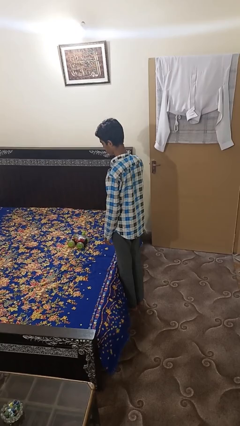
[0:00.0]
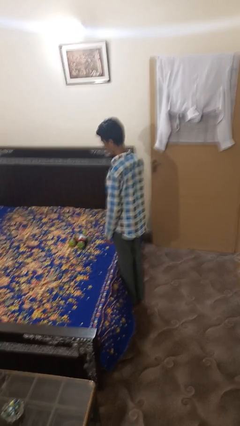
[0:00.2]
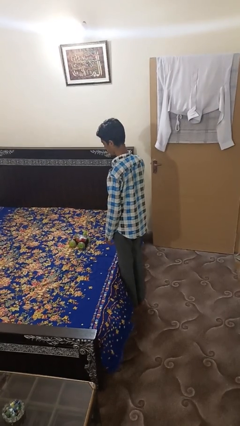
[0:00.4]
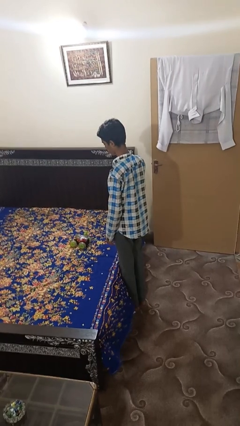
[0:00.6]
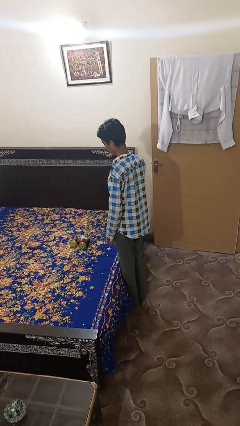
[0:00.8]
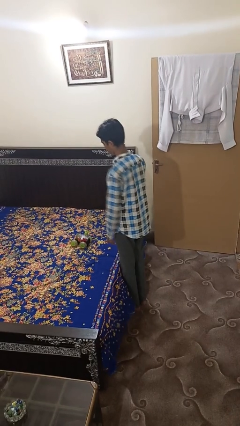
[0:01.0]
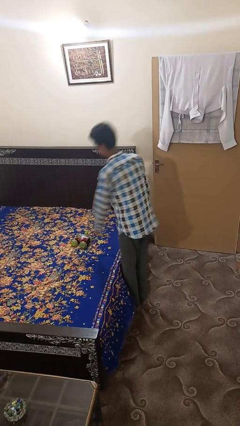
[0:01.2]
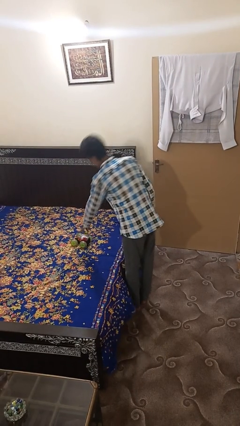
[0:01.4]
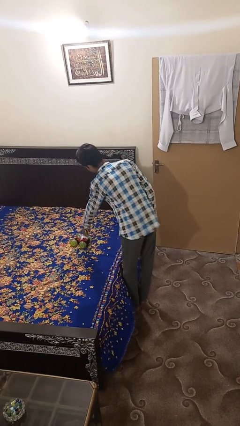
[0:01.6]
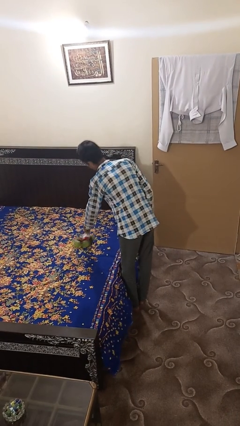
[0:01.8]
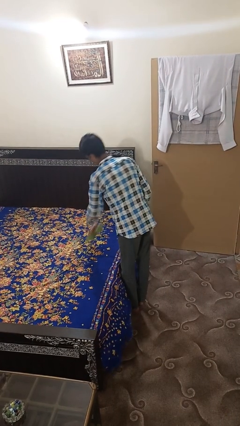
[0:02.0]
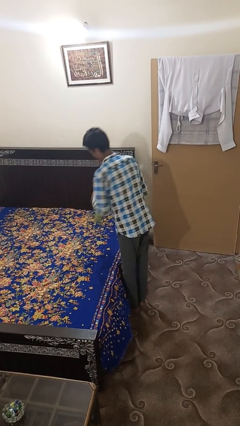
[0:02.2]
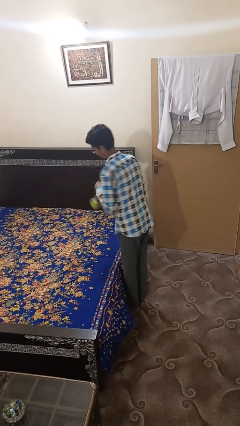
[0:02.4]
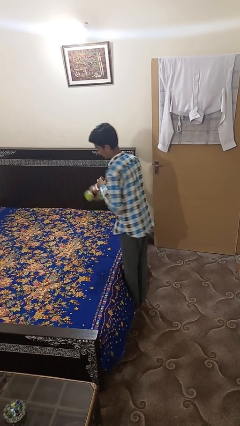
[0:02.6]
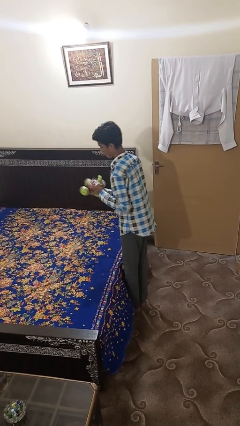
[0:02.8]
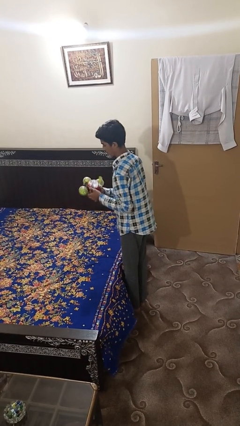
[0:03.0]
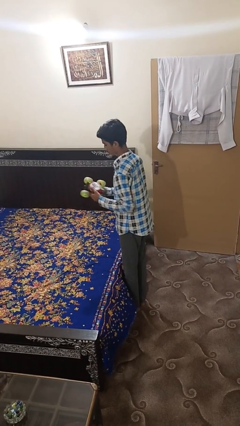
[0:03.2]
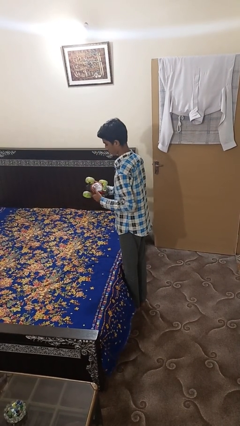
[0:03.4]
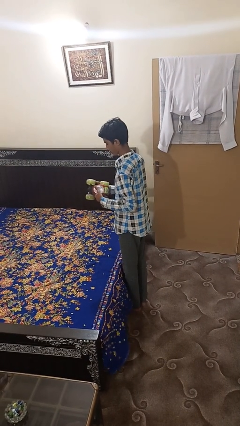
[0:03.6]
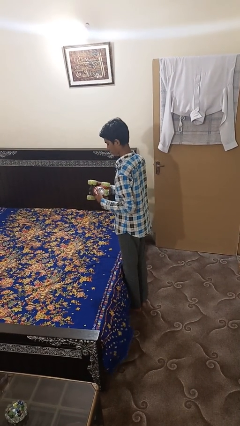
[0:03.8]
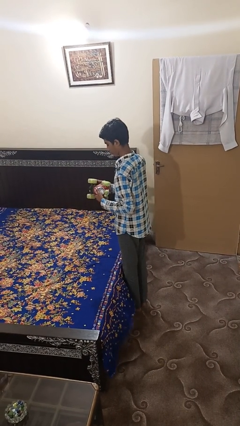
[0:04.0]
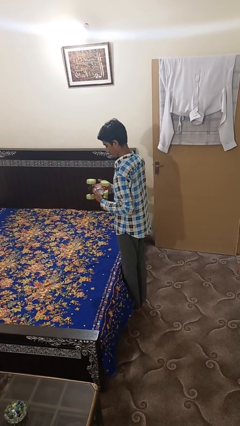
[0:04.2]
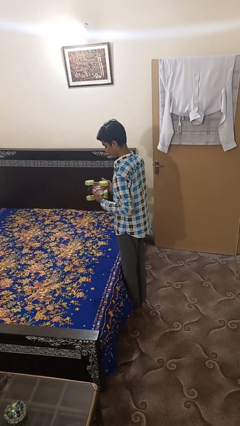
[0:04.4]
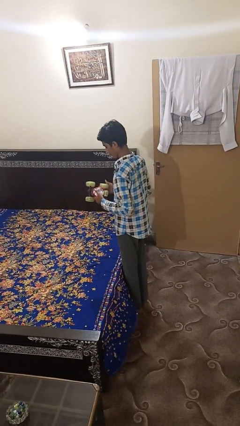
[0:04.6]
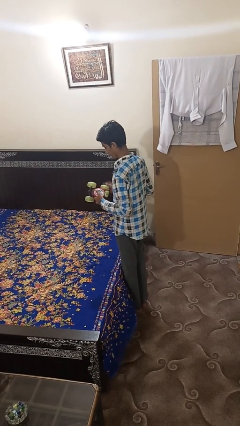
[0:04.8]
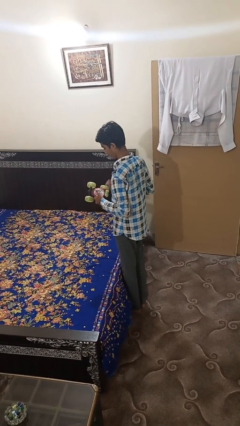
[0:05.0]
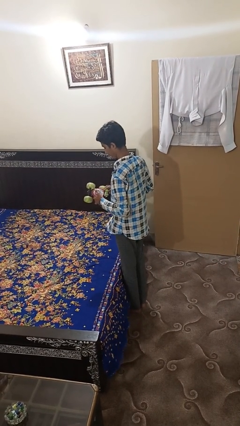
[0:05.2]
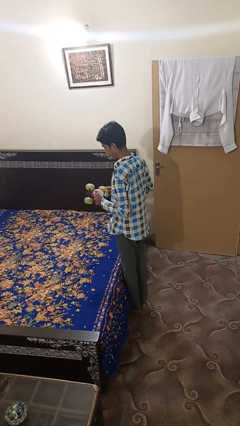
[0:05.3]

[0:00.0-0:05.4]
person picks up object from bed

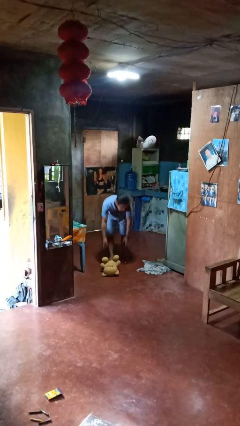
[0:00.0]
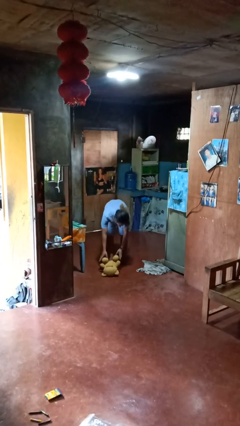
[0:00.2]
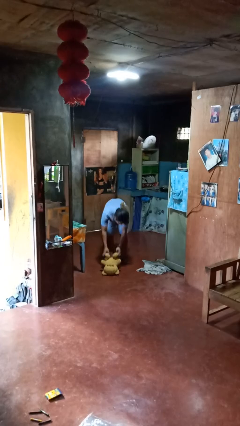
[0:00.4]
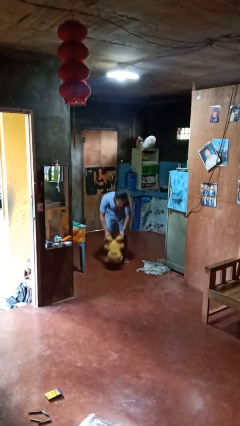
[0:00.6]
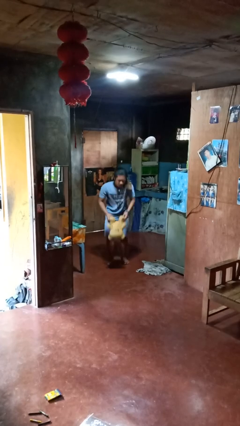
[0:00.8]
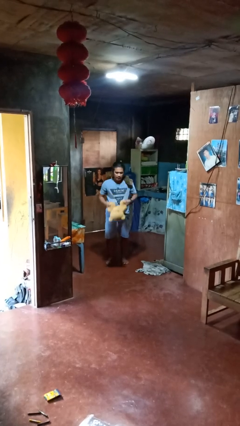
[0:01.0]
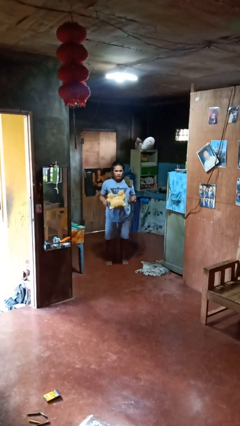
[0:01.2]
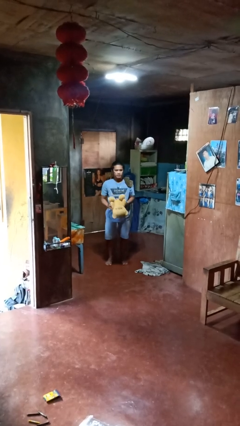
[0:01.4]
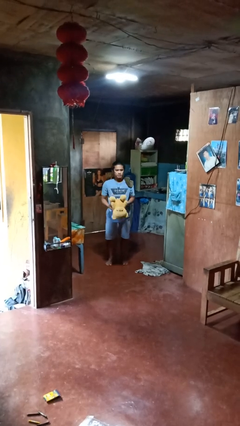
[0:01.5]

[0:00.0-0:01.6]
person picks up object from floor

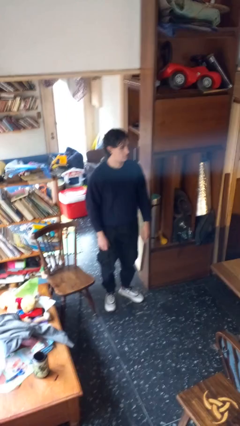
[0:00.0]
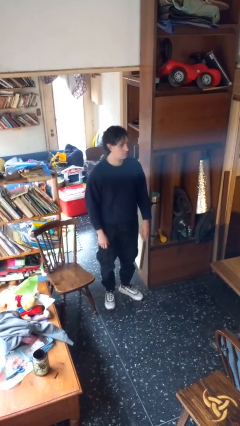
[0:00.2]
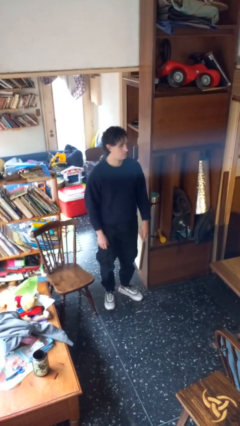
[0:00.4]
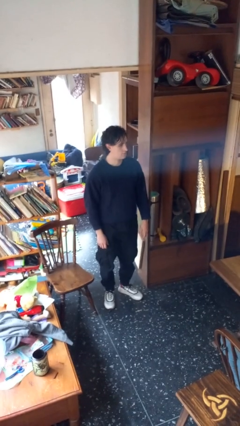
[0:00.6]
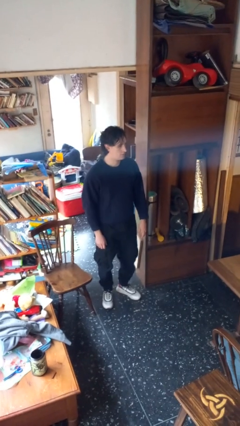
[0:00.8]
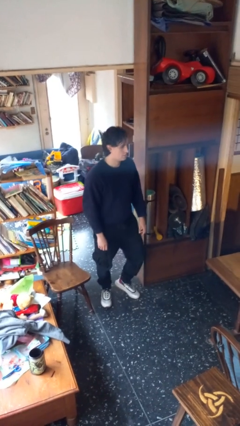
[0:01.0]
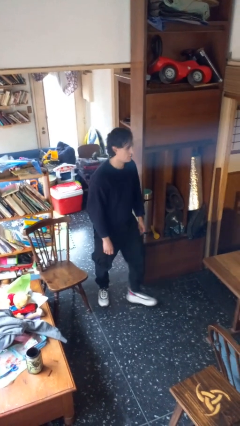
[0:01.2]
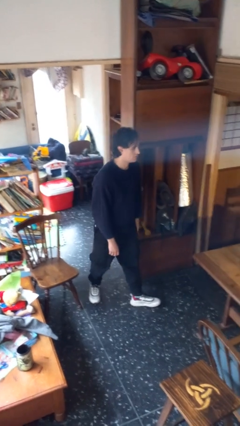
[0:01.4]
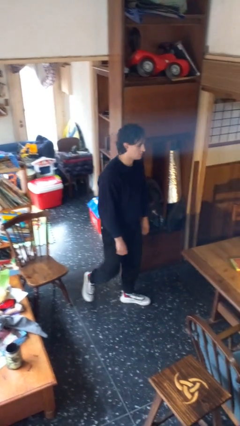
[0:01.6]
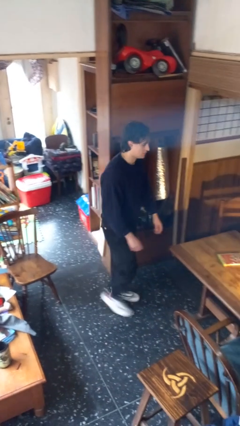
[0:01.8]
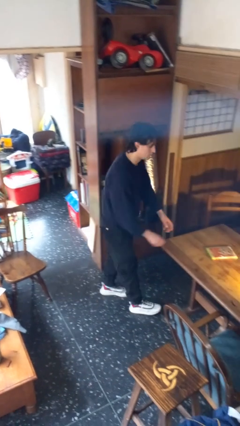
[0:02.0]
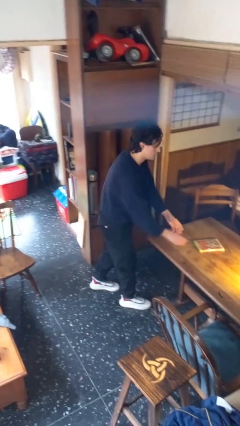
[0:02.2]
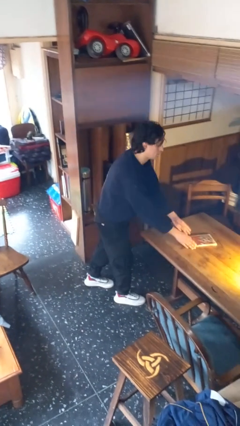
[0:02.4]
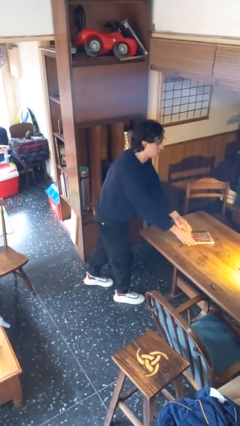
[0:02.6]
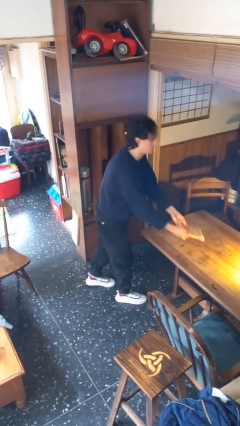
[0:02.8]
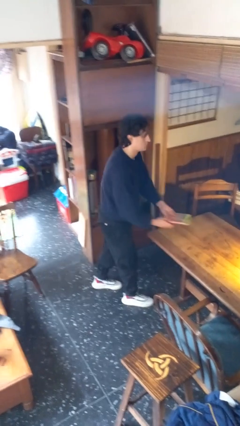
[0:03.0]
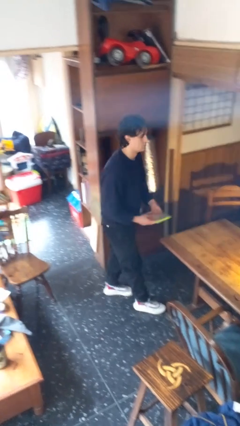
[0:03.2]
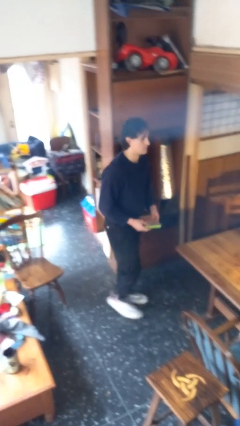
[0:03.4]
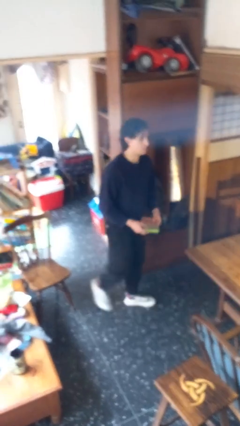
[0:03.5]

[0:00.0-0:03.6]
person picks up object from table

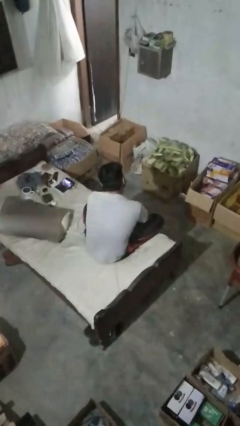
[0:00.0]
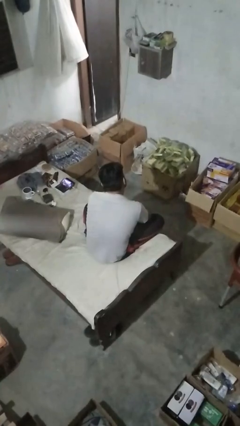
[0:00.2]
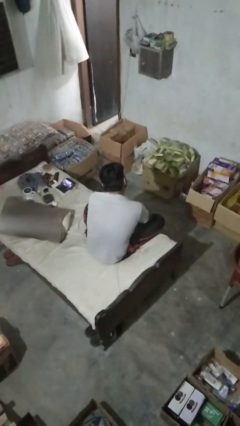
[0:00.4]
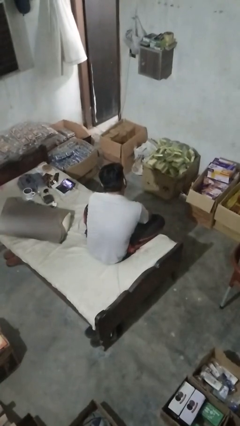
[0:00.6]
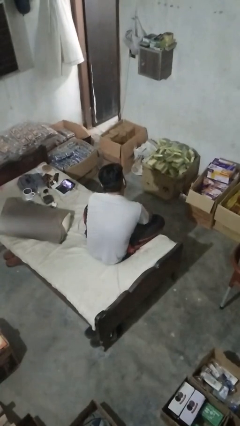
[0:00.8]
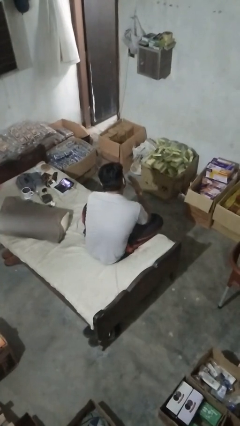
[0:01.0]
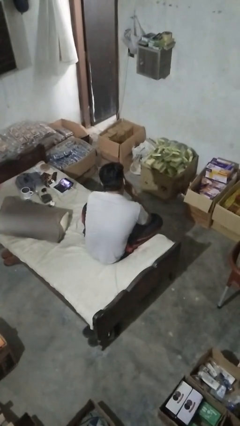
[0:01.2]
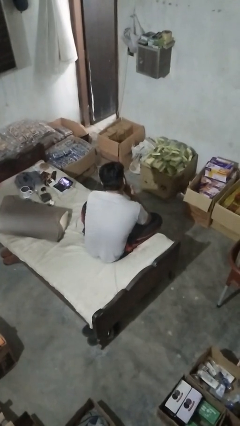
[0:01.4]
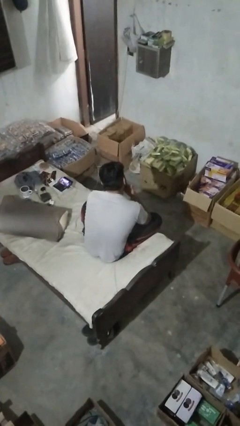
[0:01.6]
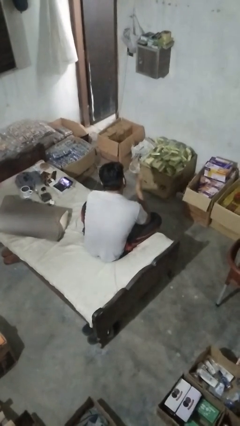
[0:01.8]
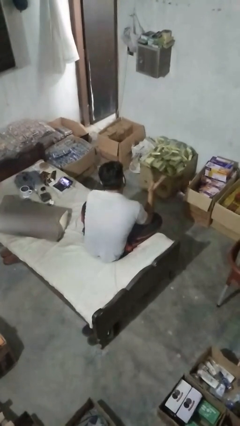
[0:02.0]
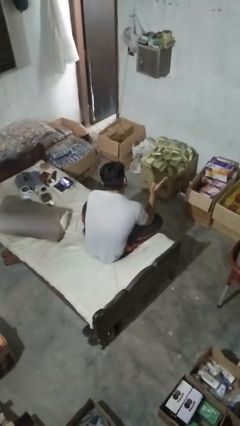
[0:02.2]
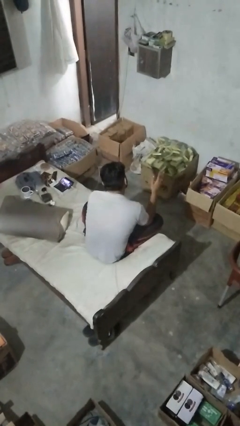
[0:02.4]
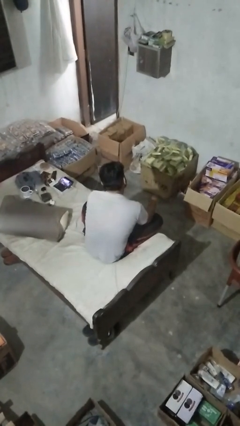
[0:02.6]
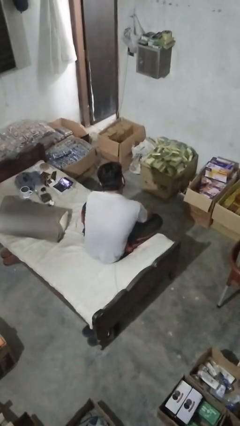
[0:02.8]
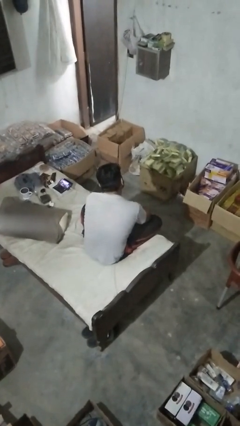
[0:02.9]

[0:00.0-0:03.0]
person gestures blow kiss

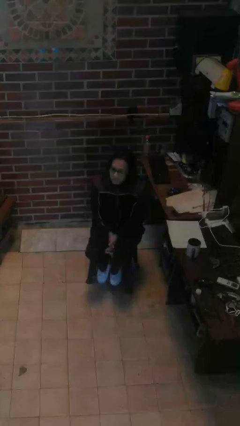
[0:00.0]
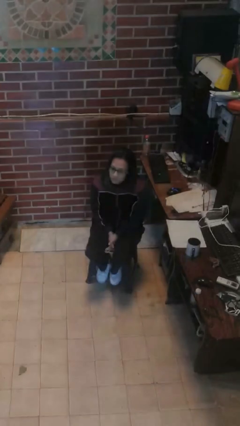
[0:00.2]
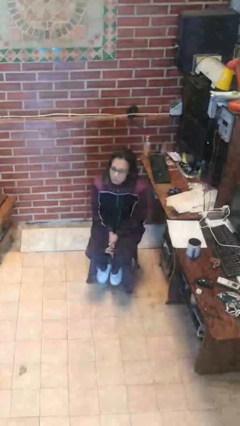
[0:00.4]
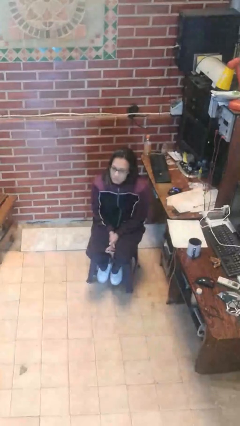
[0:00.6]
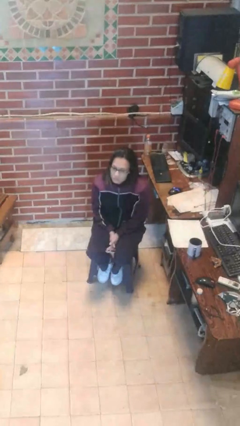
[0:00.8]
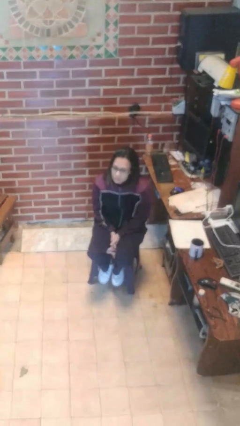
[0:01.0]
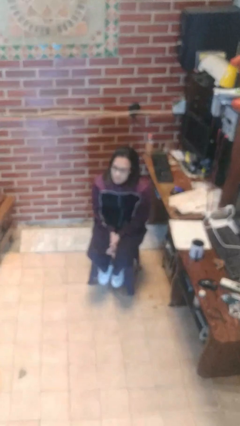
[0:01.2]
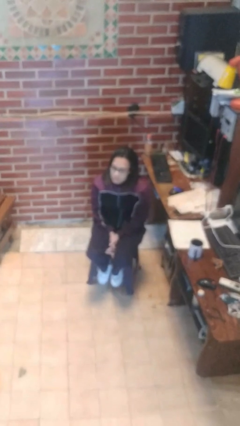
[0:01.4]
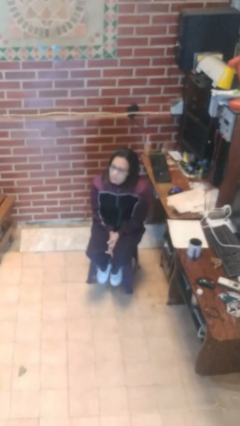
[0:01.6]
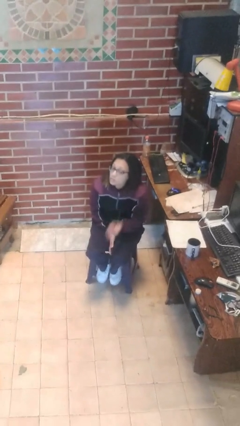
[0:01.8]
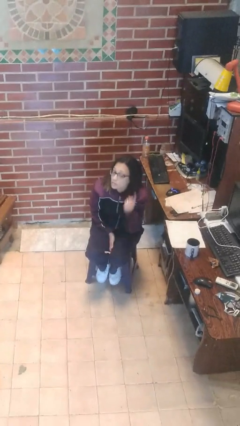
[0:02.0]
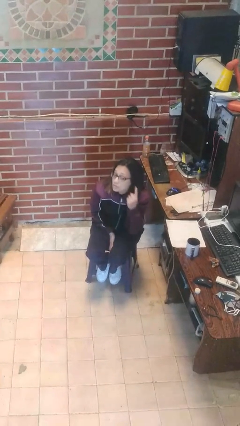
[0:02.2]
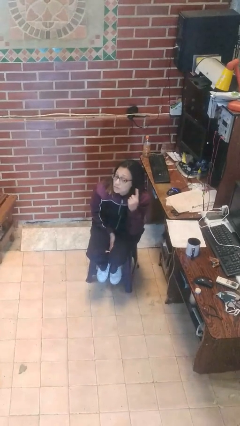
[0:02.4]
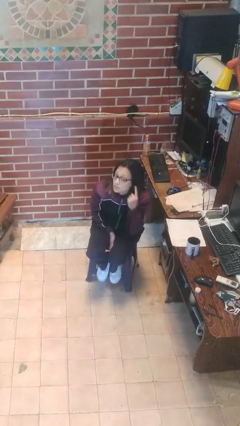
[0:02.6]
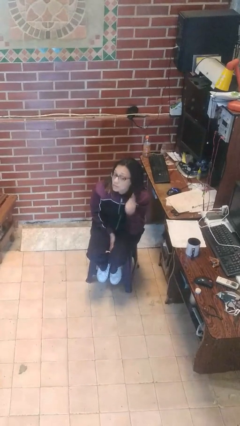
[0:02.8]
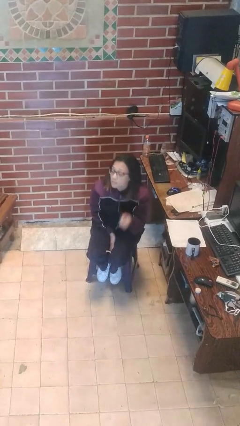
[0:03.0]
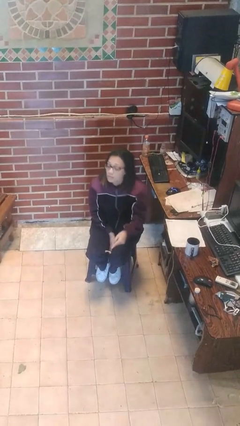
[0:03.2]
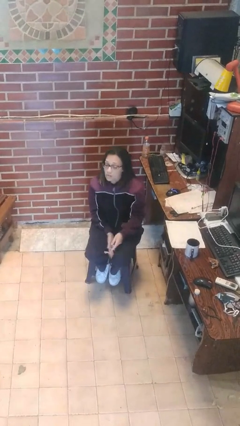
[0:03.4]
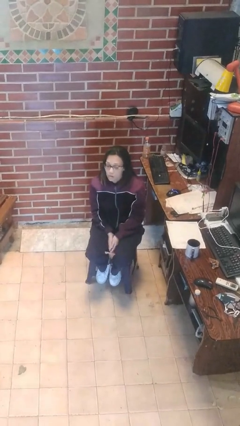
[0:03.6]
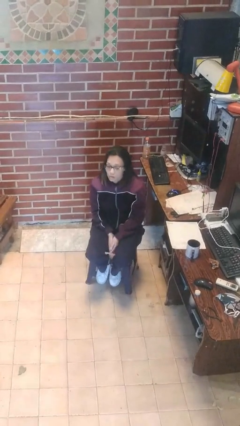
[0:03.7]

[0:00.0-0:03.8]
person gestures listen closely
